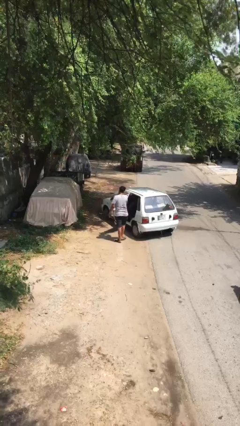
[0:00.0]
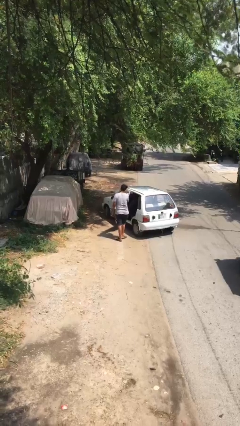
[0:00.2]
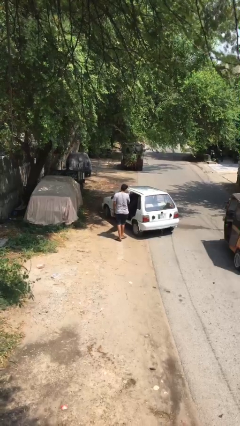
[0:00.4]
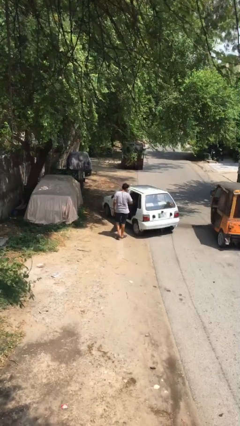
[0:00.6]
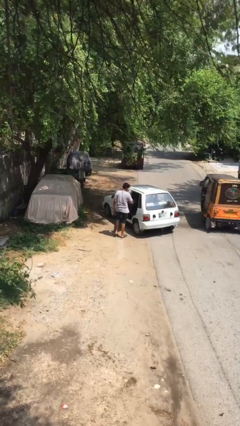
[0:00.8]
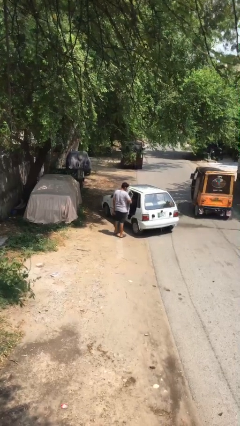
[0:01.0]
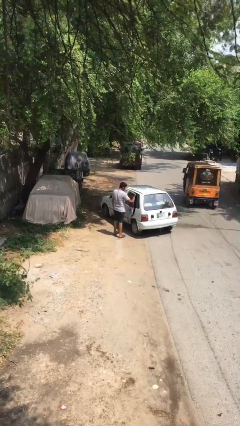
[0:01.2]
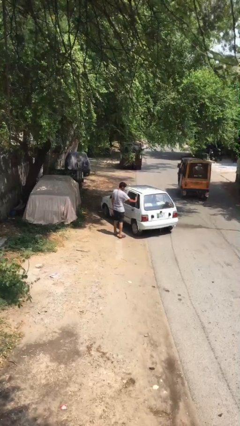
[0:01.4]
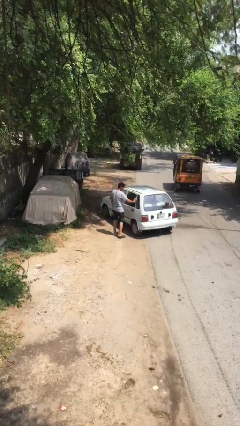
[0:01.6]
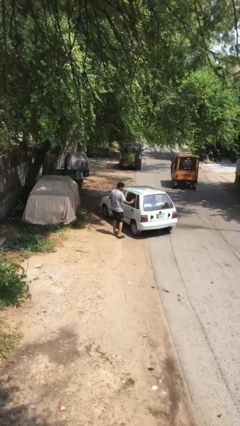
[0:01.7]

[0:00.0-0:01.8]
person closes car door

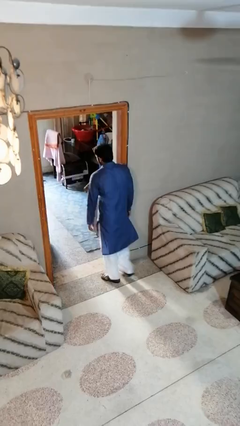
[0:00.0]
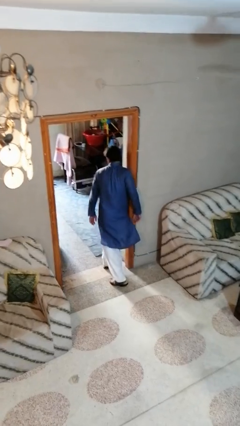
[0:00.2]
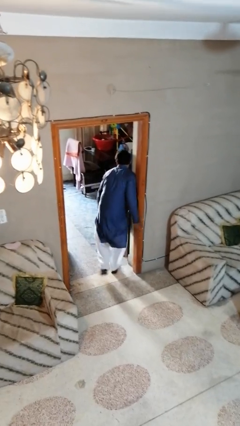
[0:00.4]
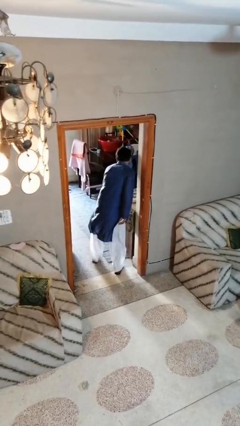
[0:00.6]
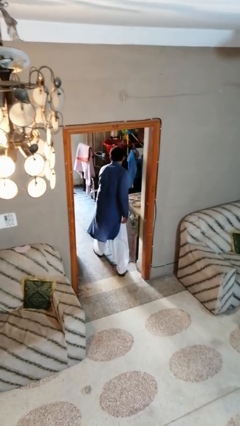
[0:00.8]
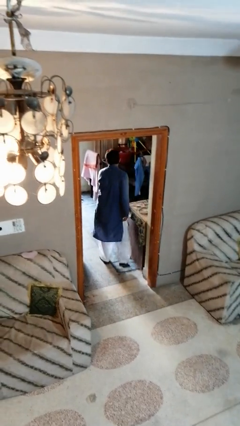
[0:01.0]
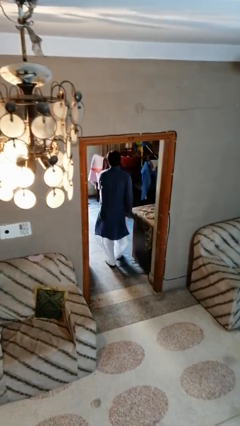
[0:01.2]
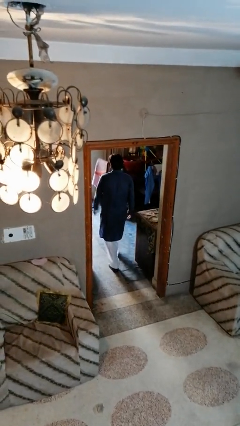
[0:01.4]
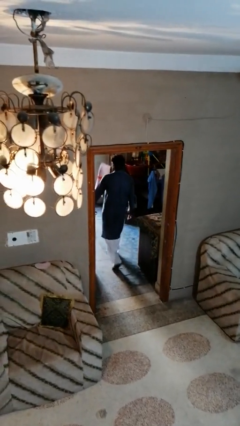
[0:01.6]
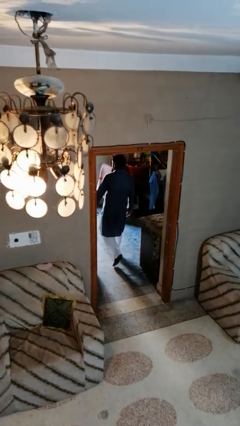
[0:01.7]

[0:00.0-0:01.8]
person bumps into wall

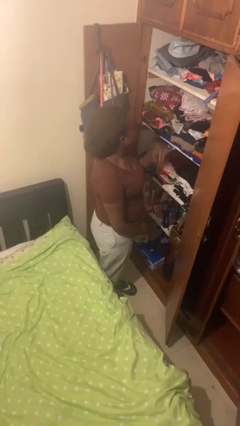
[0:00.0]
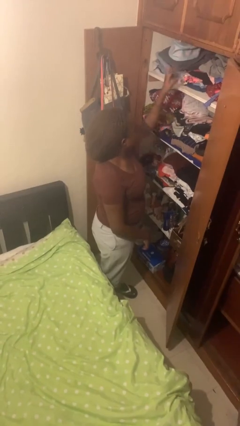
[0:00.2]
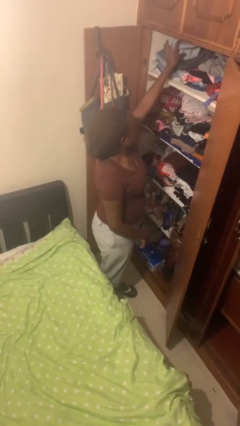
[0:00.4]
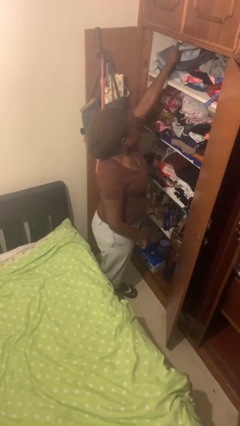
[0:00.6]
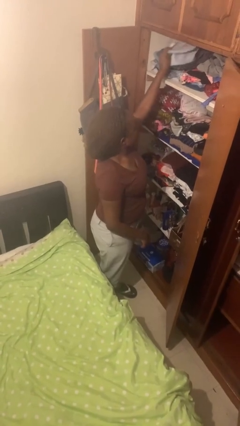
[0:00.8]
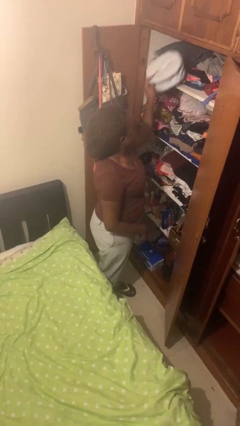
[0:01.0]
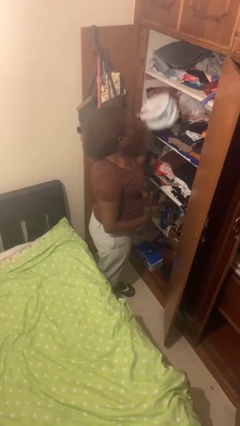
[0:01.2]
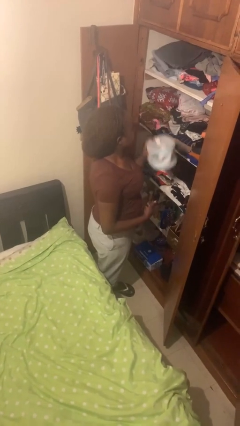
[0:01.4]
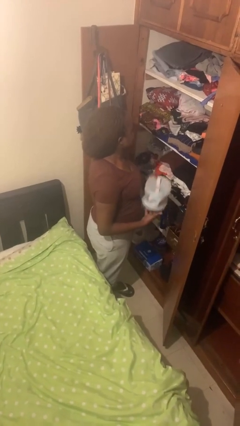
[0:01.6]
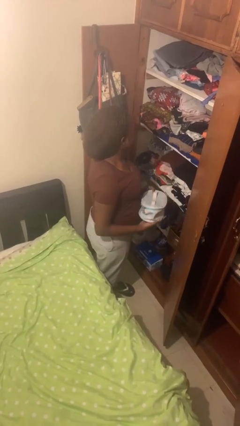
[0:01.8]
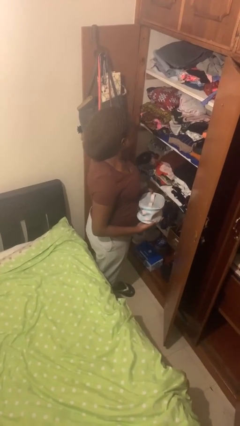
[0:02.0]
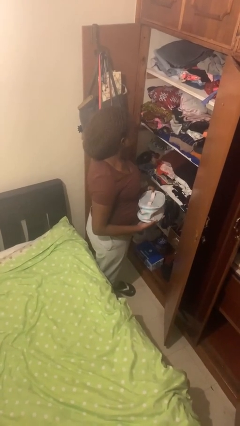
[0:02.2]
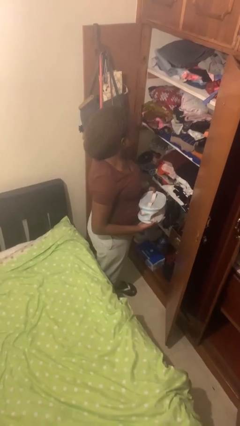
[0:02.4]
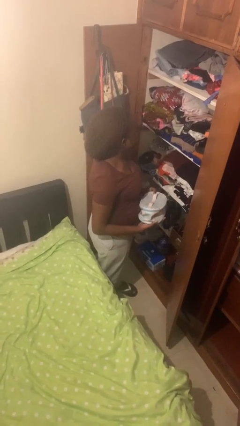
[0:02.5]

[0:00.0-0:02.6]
person picks up object from shelf

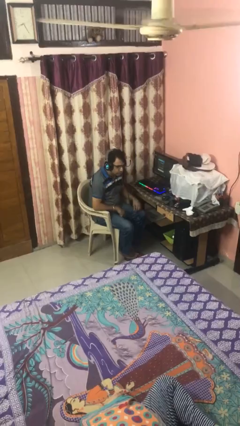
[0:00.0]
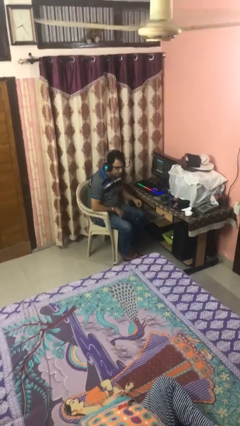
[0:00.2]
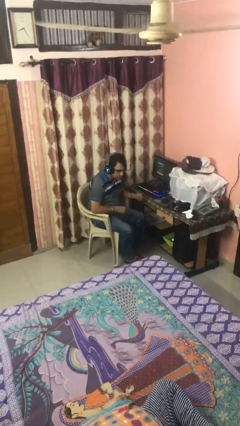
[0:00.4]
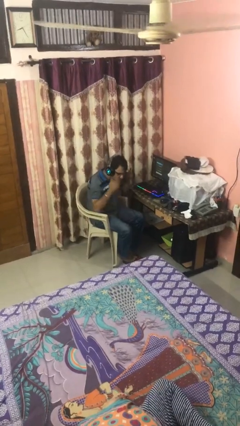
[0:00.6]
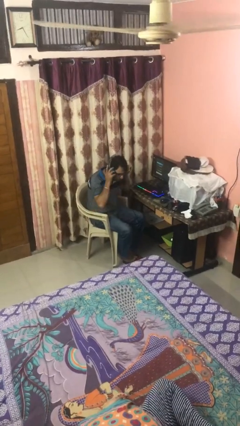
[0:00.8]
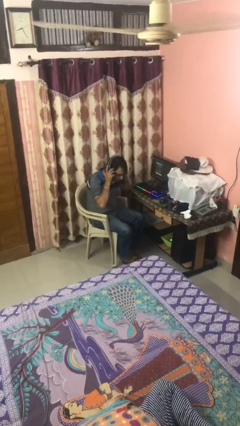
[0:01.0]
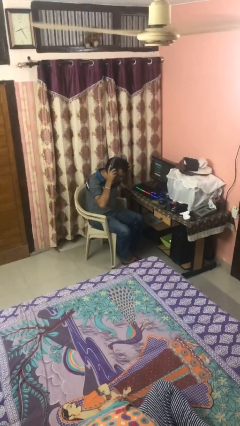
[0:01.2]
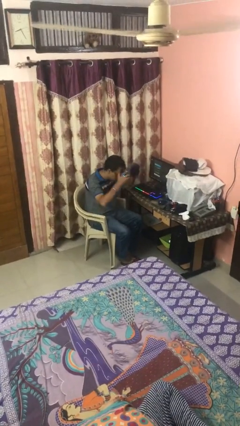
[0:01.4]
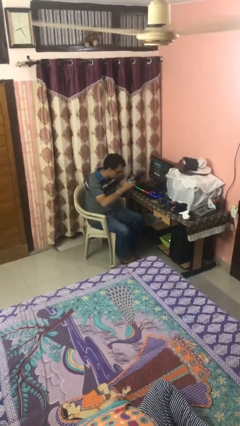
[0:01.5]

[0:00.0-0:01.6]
person takes off headphones

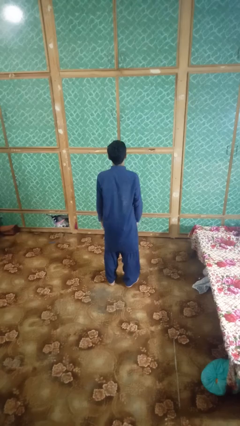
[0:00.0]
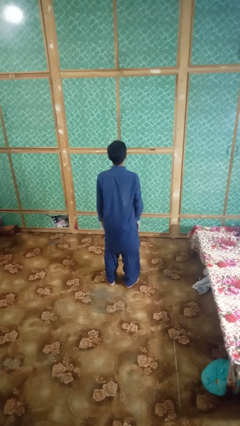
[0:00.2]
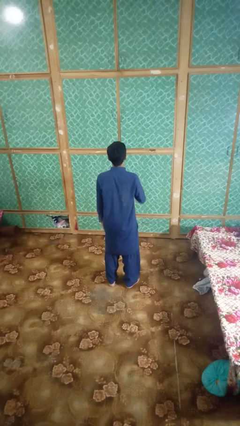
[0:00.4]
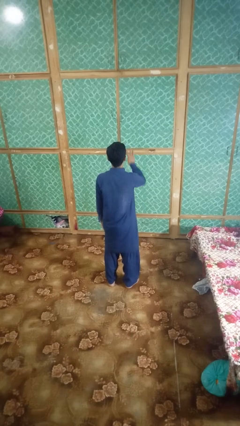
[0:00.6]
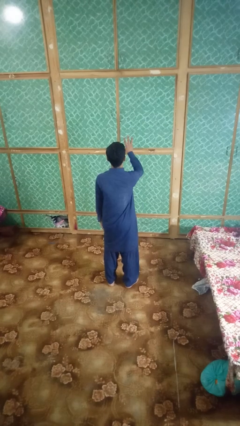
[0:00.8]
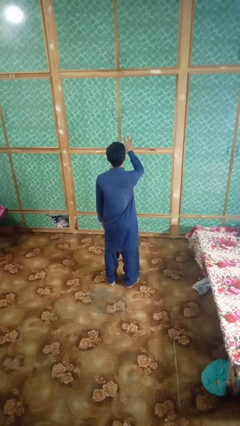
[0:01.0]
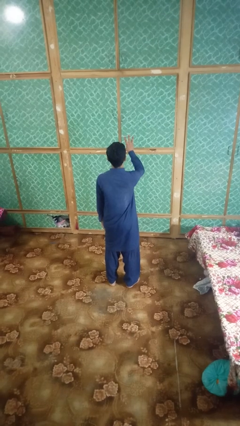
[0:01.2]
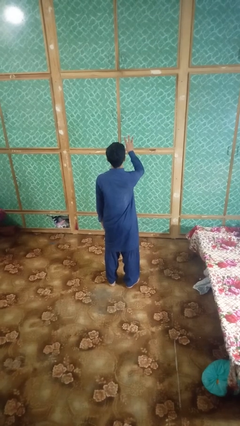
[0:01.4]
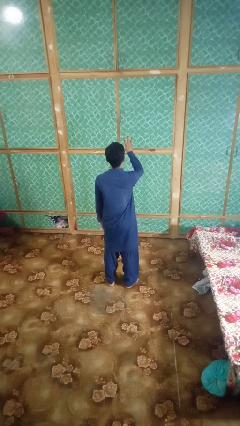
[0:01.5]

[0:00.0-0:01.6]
person gestures number three

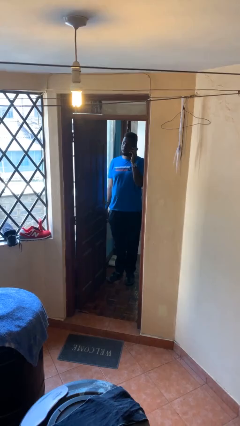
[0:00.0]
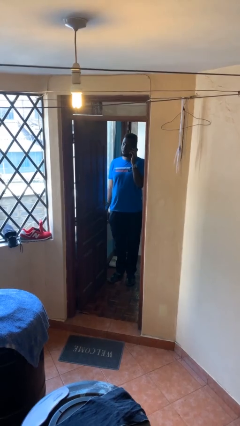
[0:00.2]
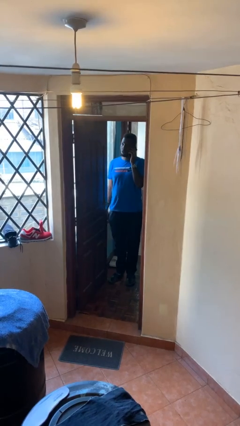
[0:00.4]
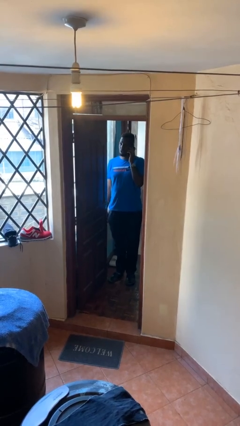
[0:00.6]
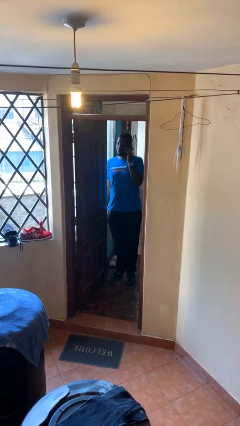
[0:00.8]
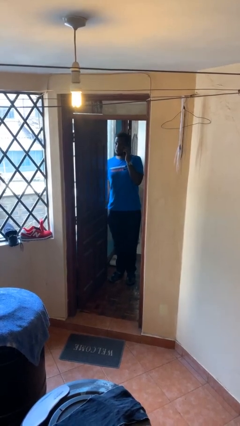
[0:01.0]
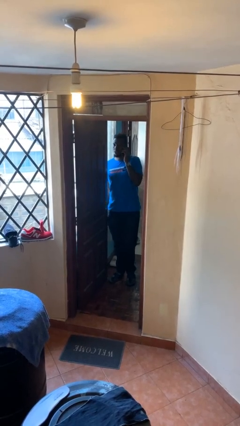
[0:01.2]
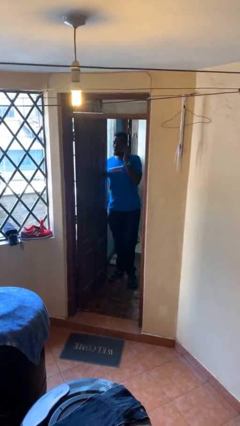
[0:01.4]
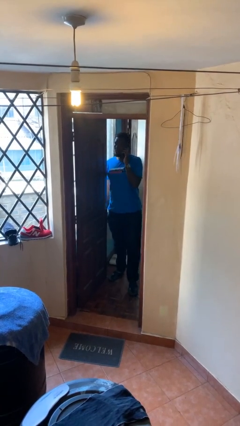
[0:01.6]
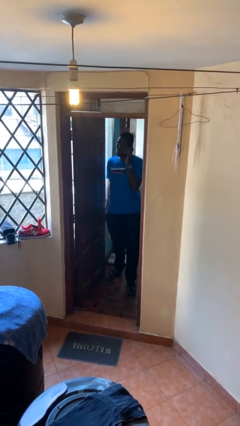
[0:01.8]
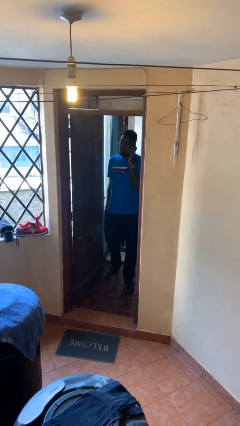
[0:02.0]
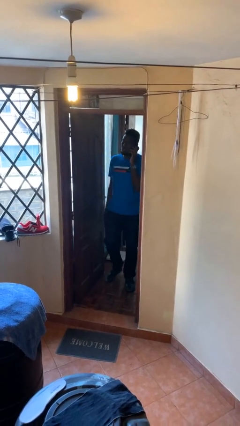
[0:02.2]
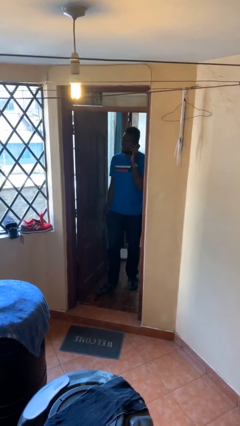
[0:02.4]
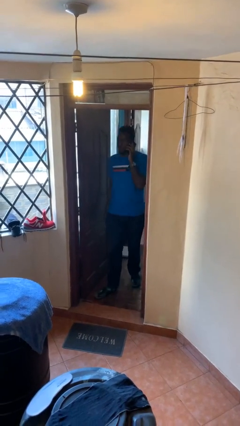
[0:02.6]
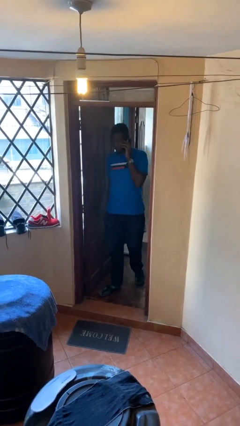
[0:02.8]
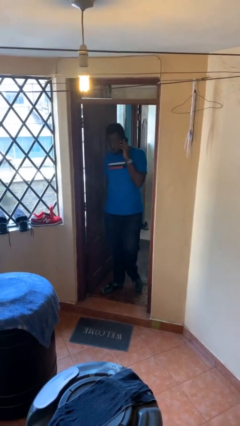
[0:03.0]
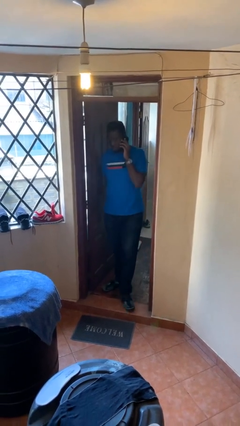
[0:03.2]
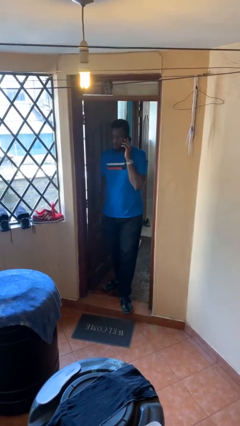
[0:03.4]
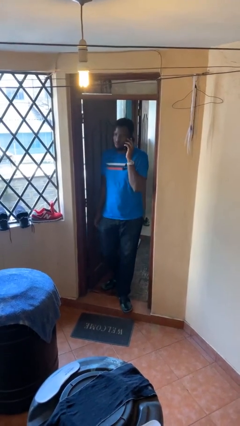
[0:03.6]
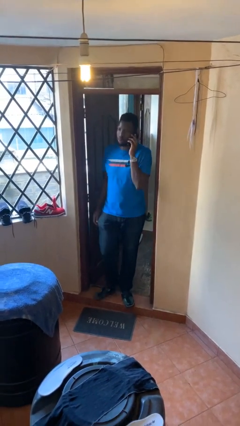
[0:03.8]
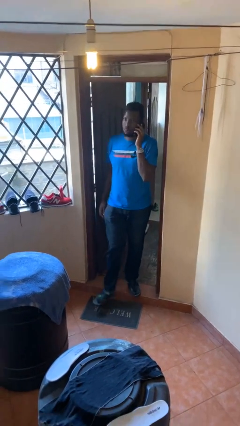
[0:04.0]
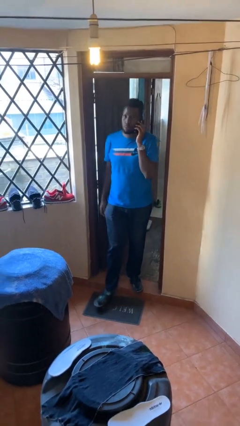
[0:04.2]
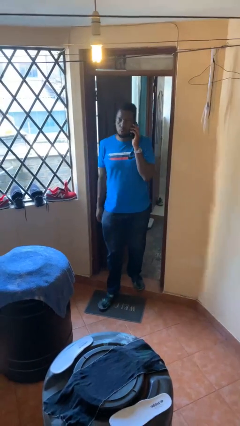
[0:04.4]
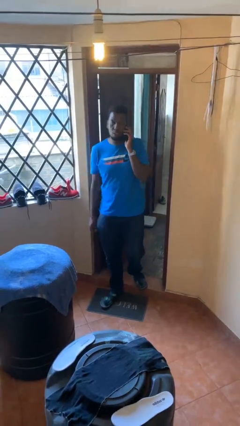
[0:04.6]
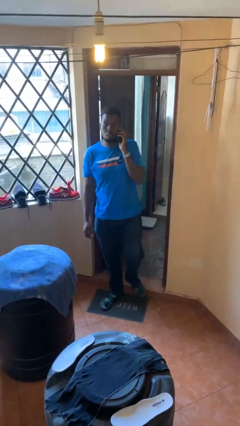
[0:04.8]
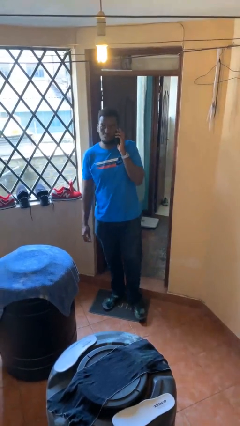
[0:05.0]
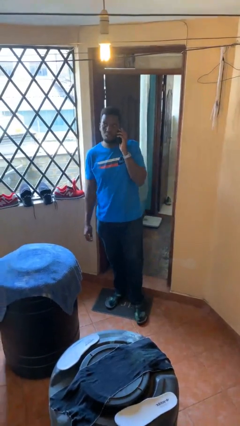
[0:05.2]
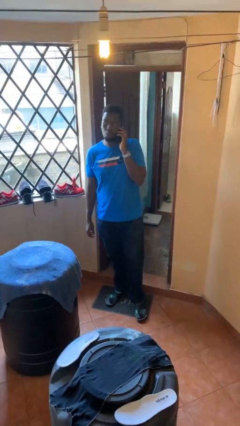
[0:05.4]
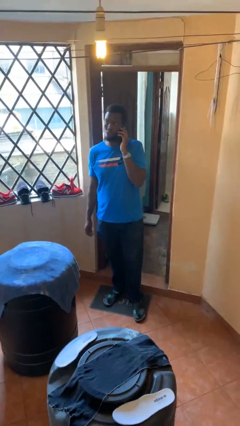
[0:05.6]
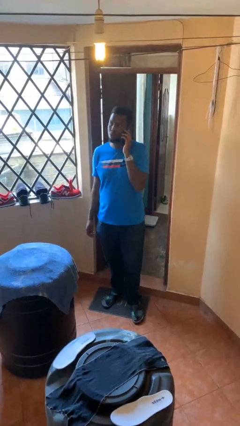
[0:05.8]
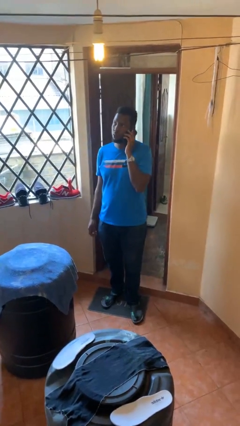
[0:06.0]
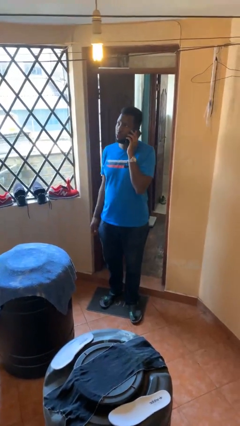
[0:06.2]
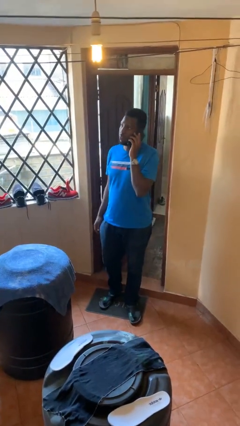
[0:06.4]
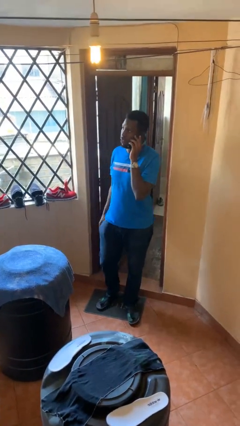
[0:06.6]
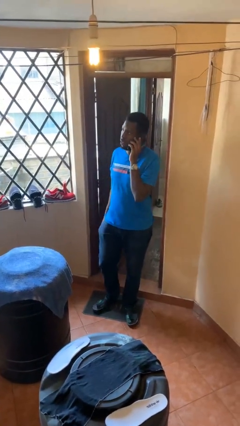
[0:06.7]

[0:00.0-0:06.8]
person enters scene through structure

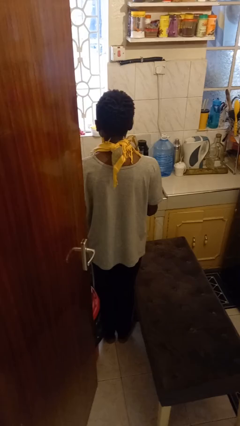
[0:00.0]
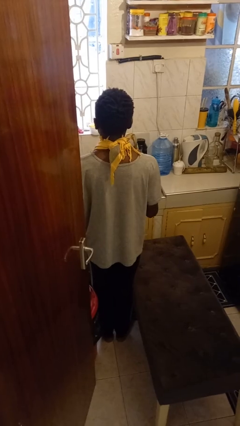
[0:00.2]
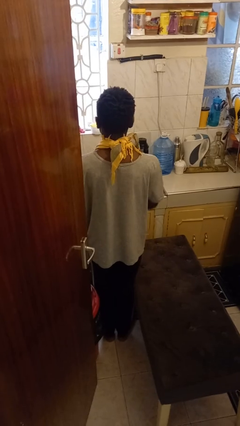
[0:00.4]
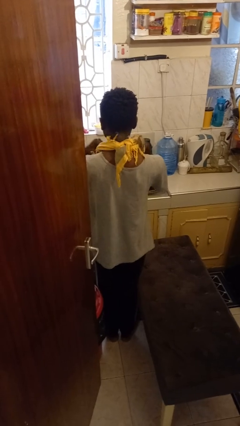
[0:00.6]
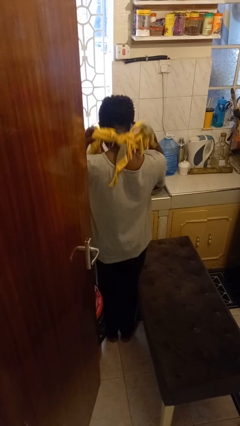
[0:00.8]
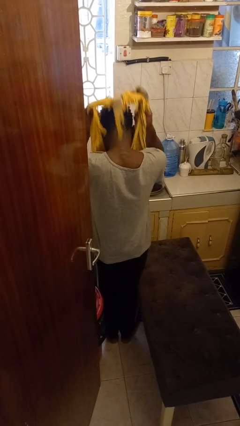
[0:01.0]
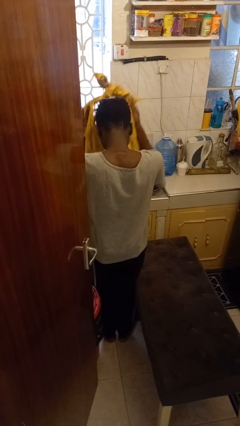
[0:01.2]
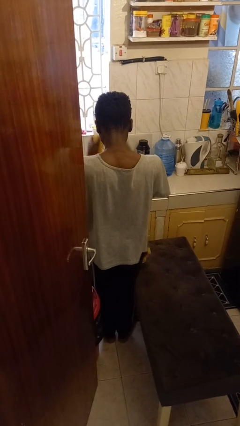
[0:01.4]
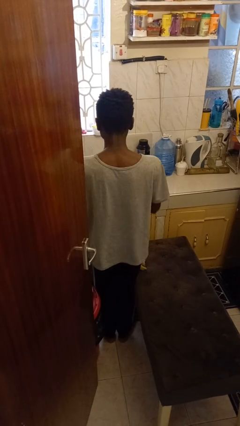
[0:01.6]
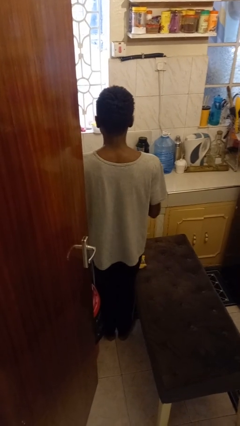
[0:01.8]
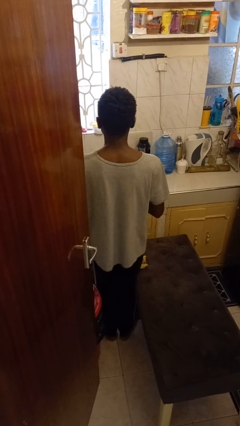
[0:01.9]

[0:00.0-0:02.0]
person takes off apron
